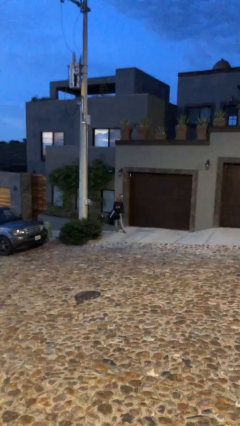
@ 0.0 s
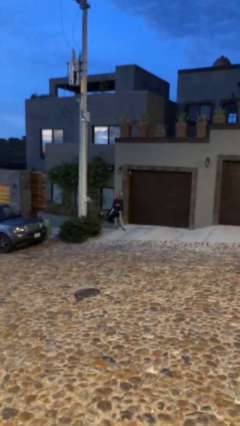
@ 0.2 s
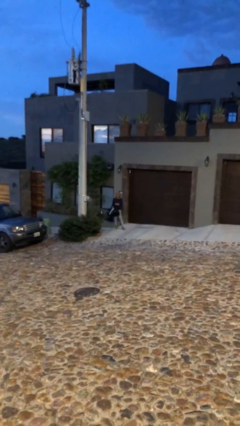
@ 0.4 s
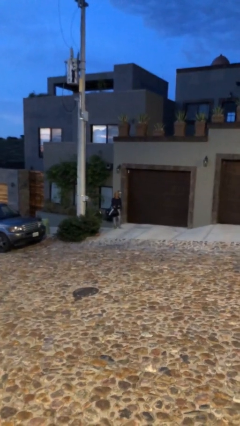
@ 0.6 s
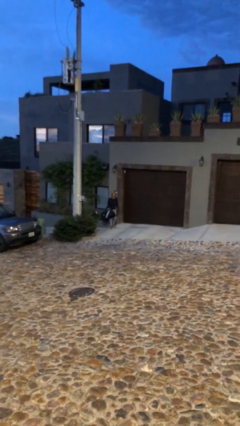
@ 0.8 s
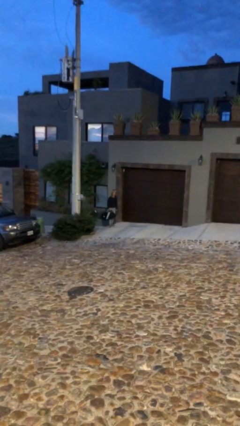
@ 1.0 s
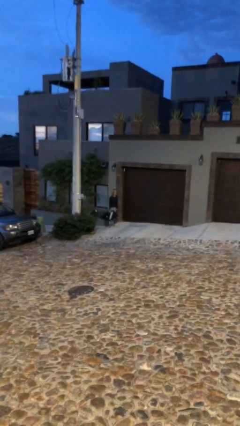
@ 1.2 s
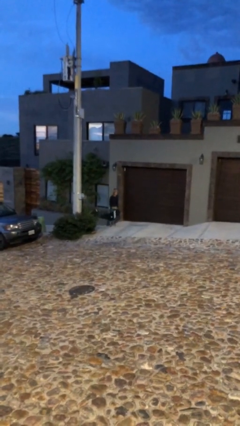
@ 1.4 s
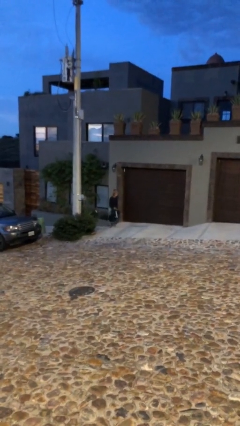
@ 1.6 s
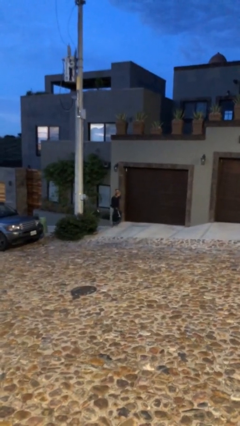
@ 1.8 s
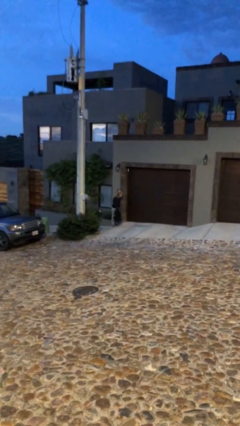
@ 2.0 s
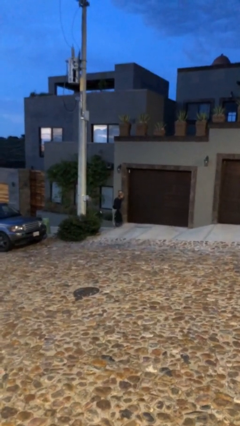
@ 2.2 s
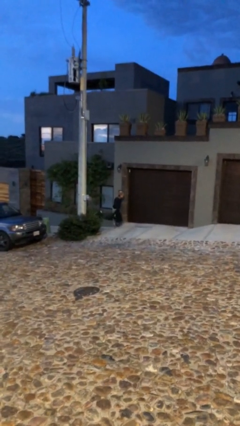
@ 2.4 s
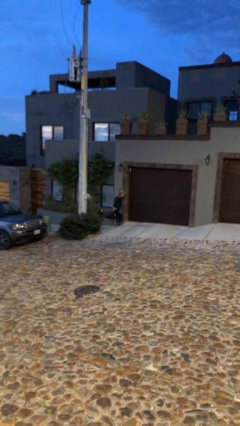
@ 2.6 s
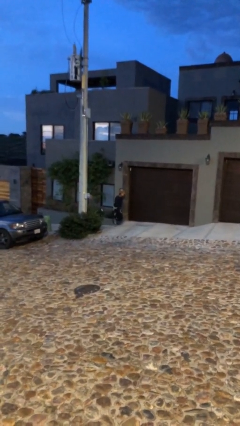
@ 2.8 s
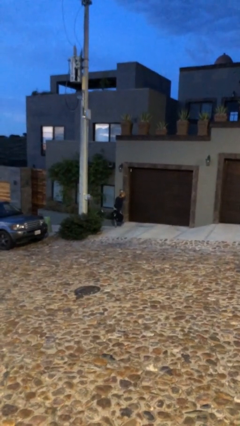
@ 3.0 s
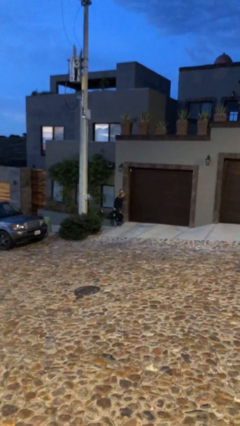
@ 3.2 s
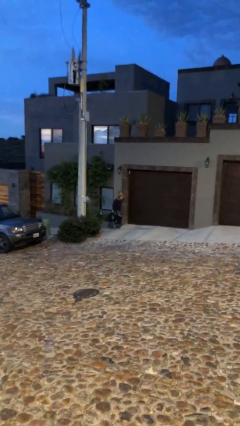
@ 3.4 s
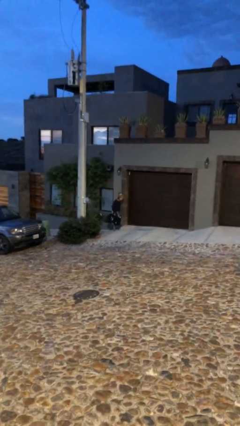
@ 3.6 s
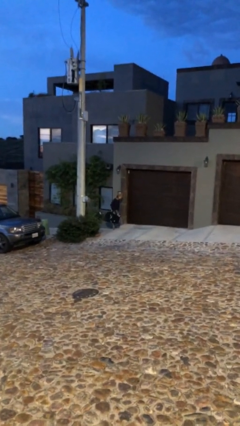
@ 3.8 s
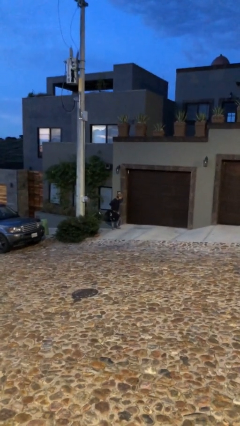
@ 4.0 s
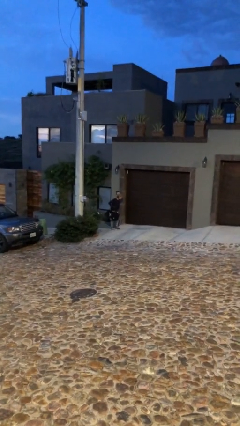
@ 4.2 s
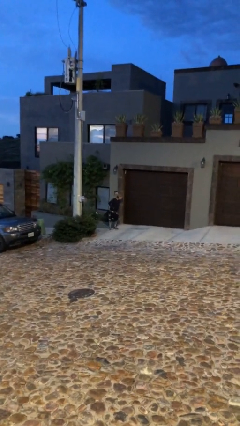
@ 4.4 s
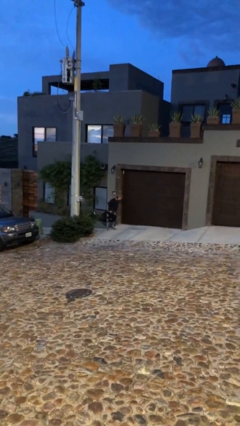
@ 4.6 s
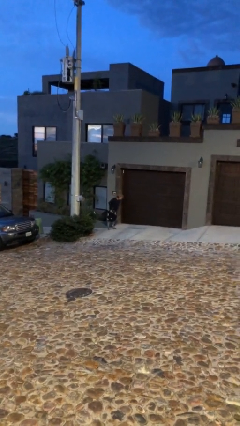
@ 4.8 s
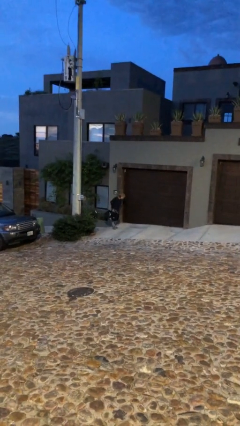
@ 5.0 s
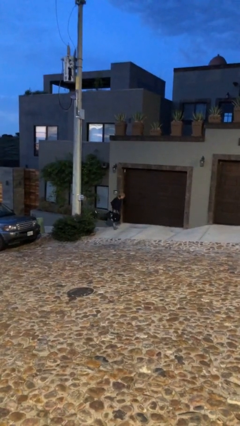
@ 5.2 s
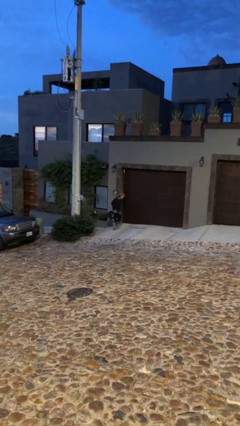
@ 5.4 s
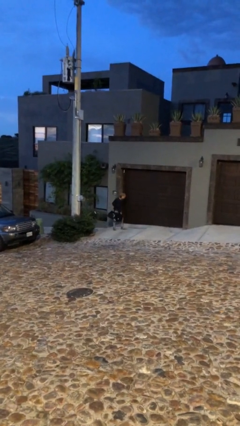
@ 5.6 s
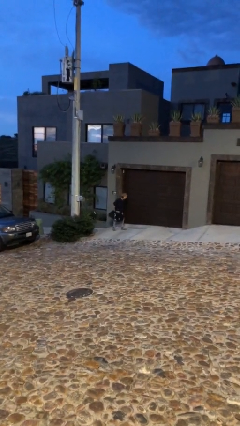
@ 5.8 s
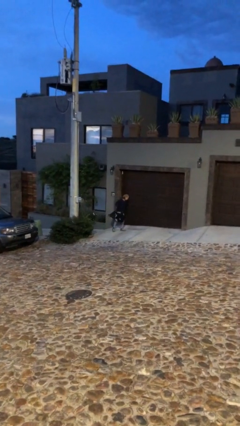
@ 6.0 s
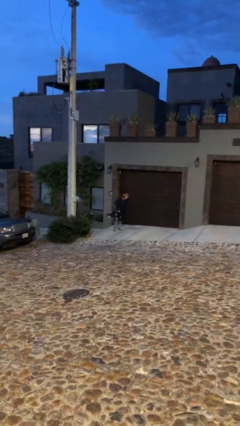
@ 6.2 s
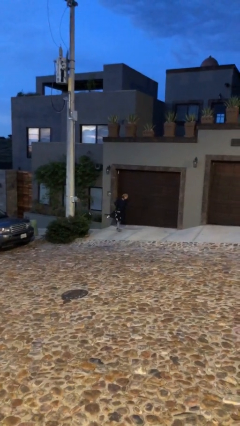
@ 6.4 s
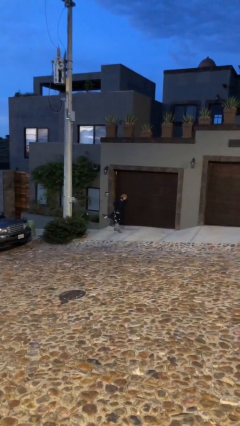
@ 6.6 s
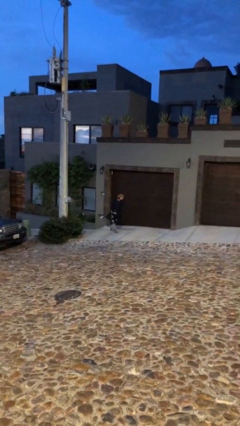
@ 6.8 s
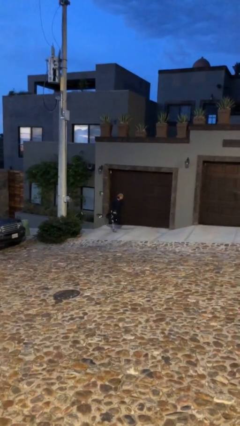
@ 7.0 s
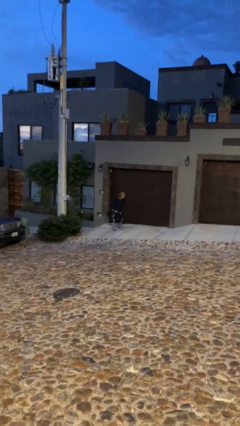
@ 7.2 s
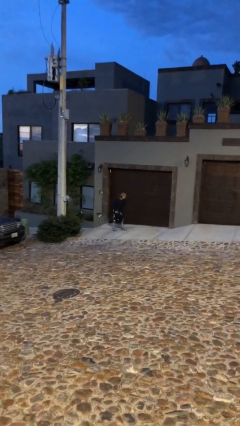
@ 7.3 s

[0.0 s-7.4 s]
person carries heavy object

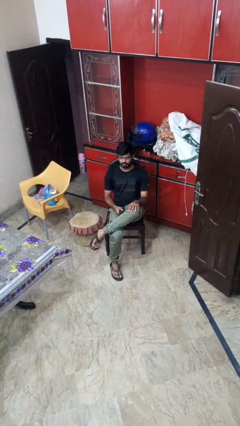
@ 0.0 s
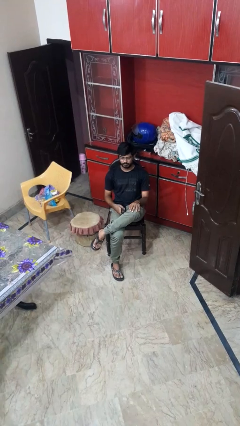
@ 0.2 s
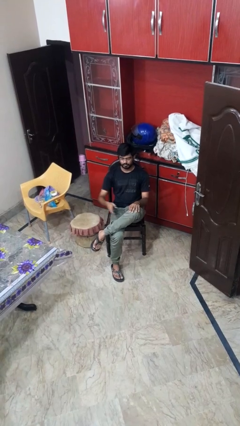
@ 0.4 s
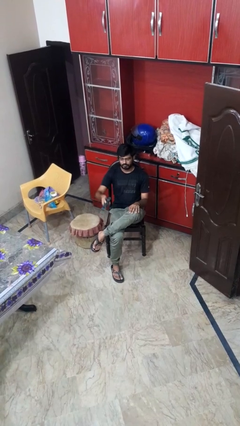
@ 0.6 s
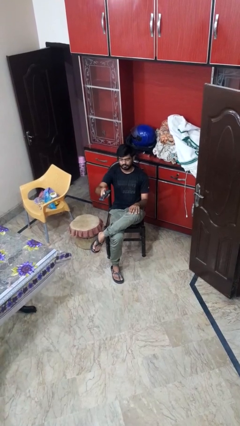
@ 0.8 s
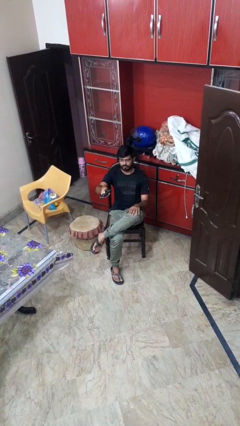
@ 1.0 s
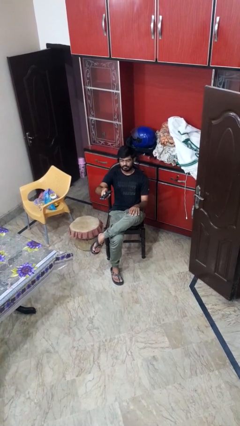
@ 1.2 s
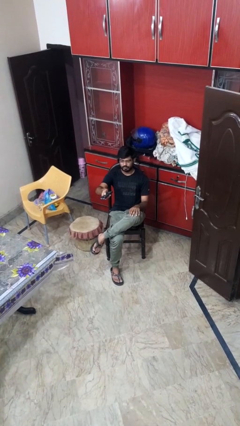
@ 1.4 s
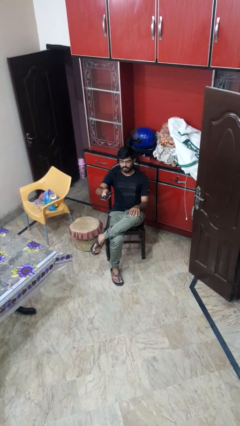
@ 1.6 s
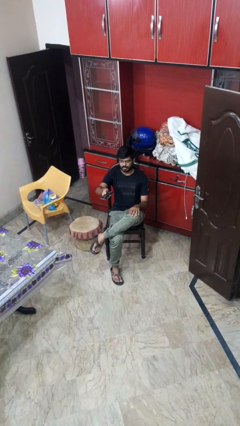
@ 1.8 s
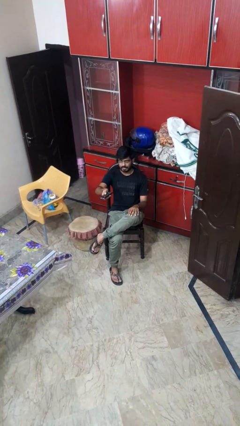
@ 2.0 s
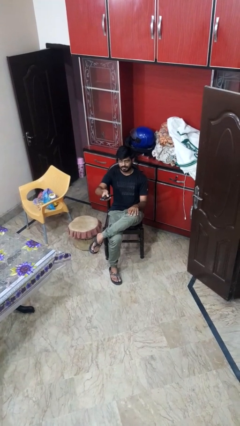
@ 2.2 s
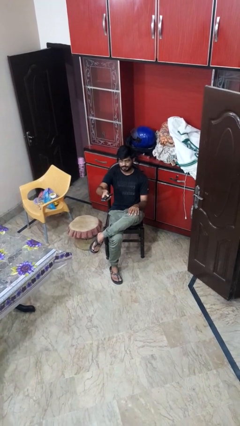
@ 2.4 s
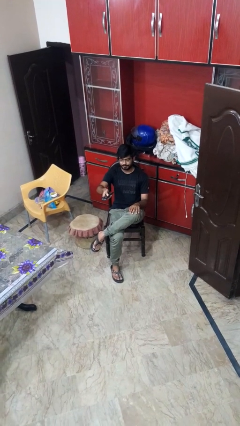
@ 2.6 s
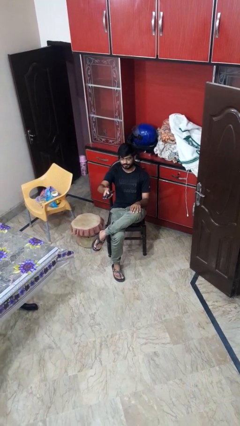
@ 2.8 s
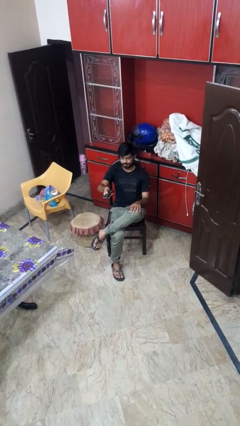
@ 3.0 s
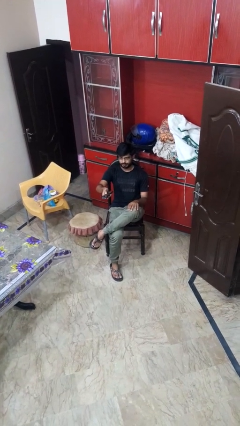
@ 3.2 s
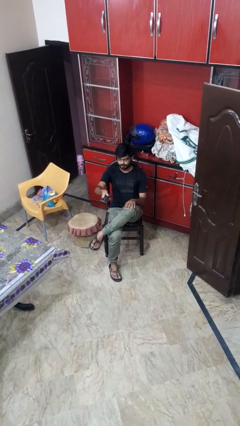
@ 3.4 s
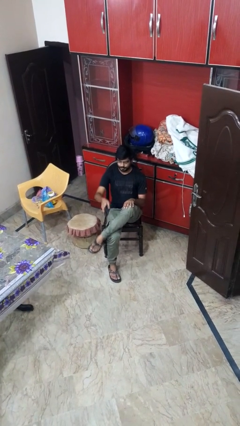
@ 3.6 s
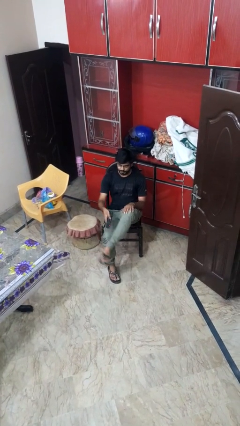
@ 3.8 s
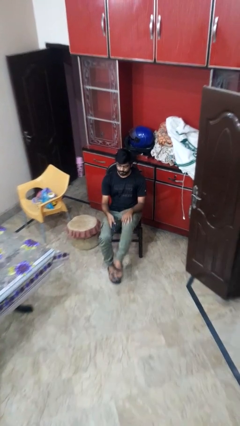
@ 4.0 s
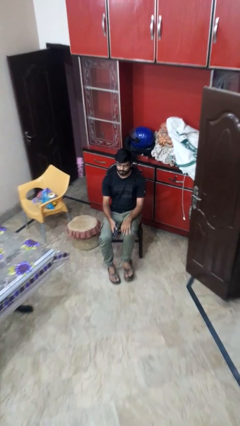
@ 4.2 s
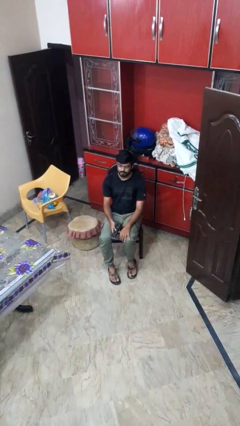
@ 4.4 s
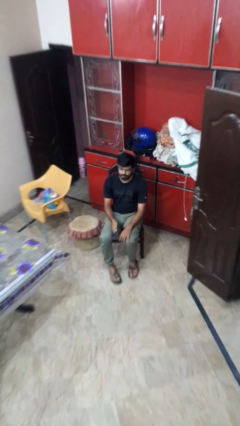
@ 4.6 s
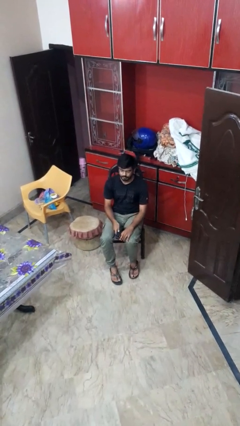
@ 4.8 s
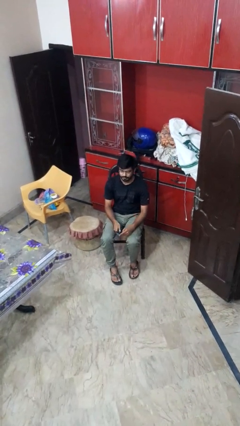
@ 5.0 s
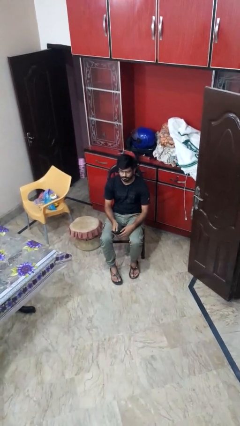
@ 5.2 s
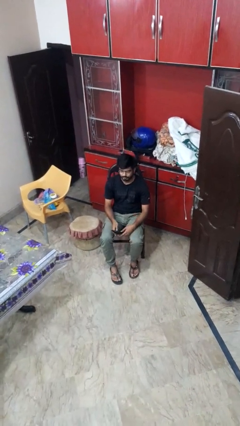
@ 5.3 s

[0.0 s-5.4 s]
person uses television remote

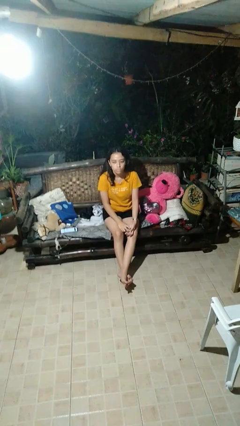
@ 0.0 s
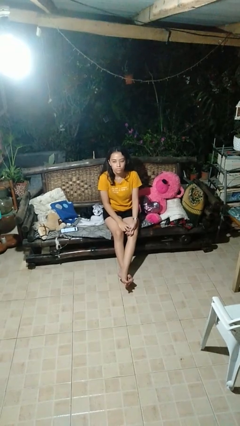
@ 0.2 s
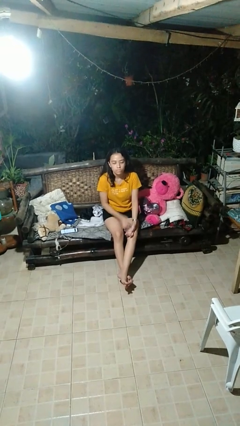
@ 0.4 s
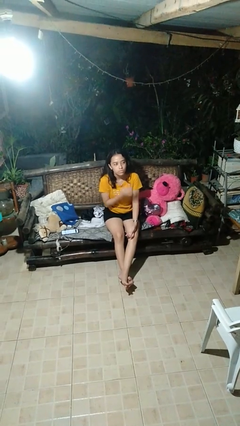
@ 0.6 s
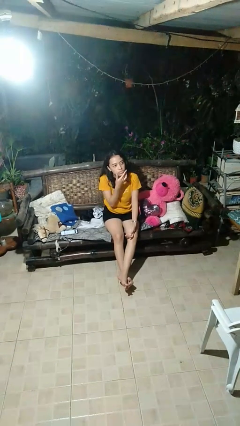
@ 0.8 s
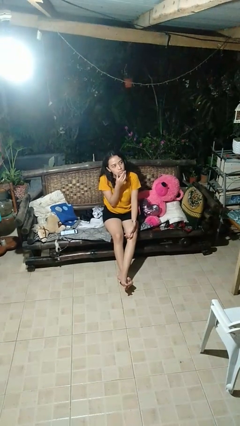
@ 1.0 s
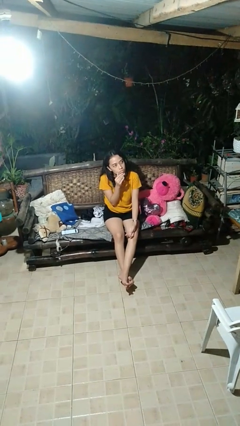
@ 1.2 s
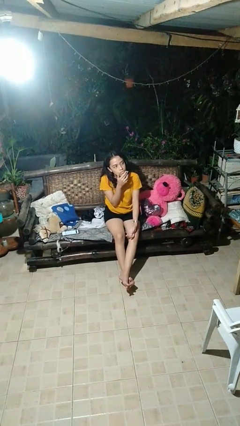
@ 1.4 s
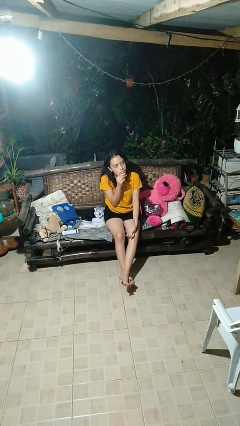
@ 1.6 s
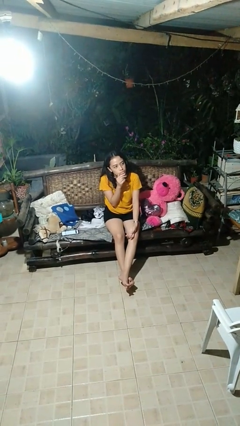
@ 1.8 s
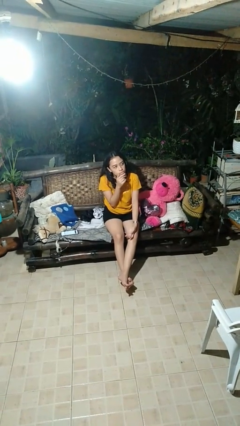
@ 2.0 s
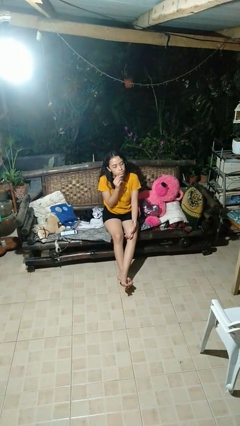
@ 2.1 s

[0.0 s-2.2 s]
person strokes chin

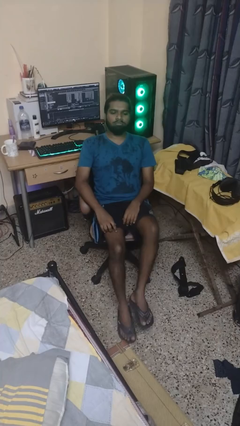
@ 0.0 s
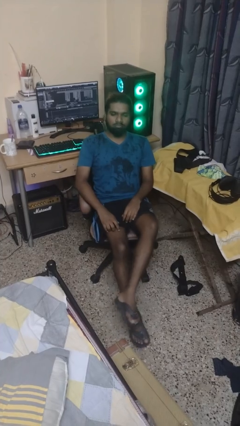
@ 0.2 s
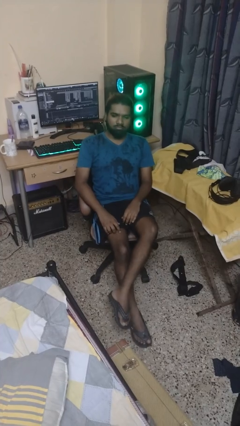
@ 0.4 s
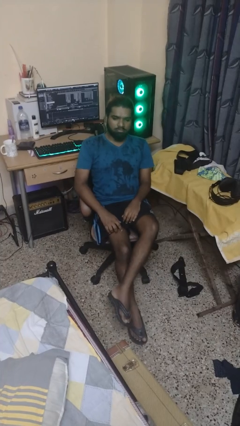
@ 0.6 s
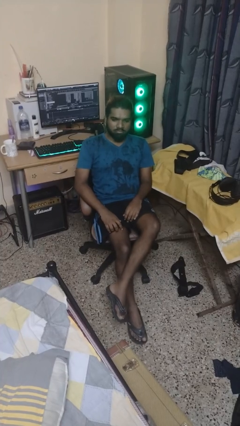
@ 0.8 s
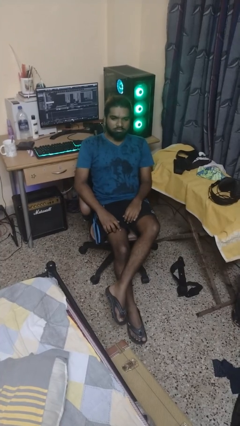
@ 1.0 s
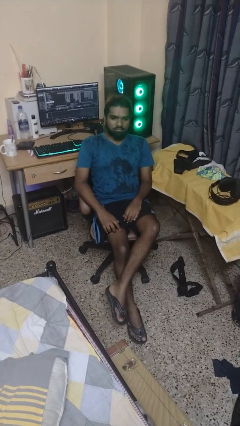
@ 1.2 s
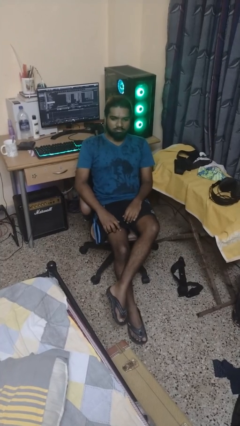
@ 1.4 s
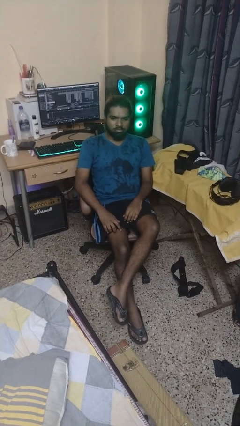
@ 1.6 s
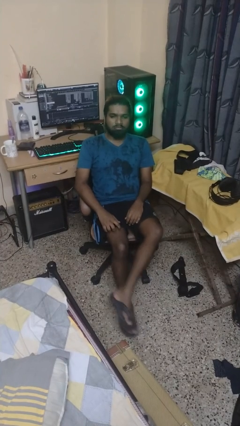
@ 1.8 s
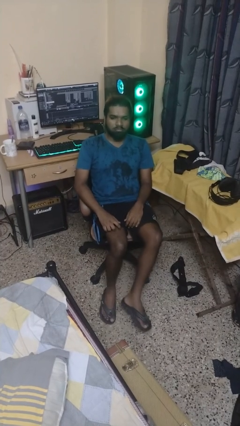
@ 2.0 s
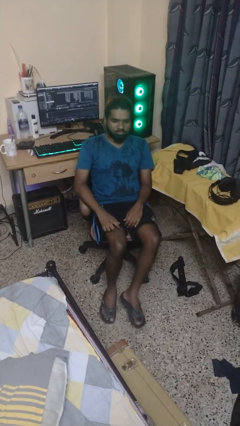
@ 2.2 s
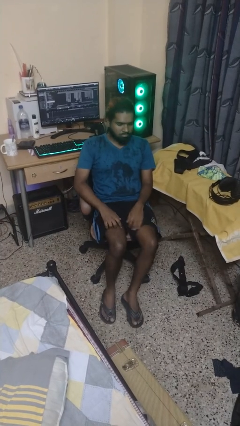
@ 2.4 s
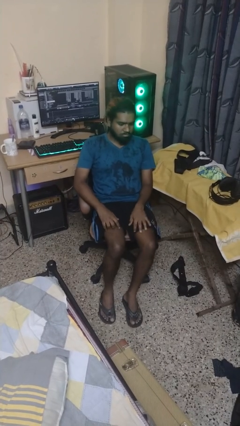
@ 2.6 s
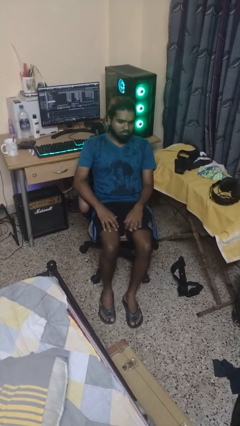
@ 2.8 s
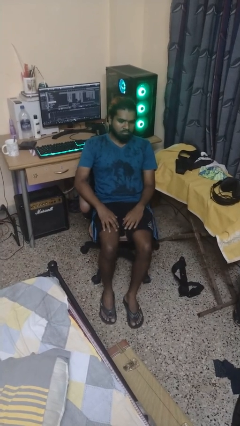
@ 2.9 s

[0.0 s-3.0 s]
person crosses legs
